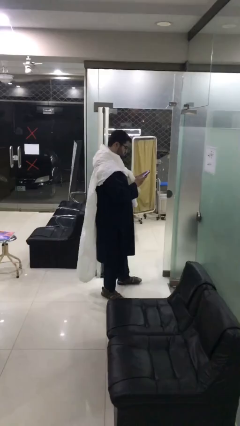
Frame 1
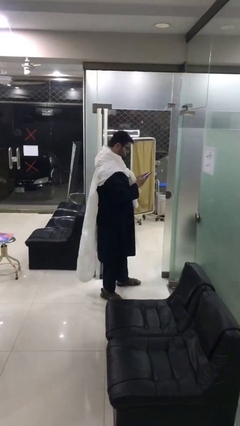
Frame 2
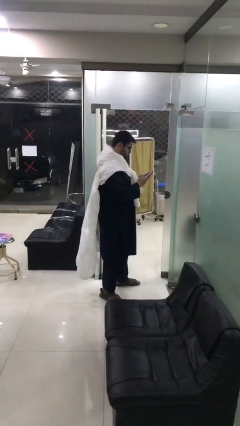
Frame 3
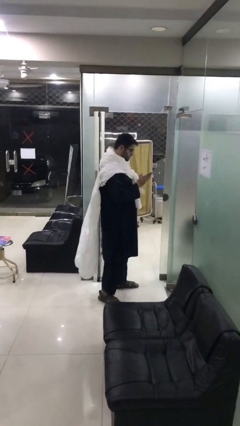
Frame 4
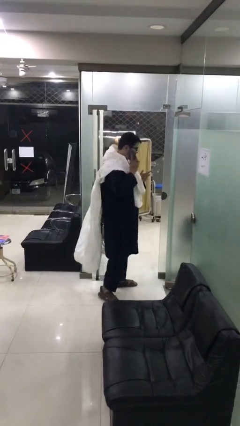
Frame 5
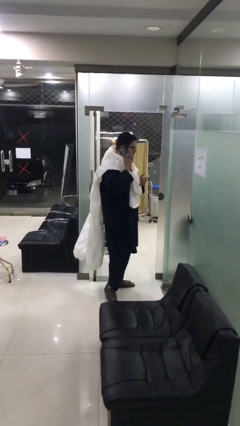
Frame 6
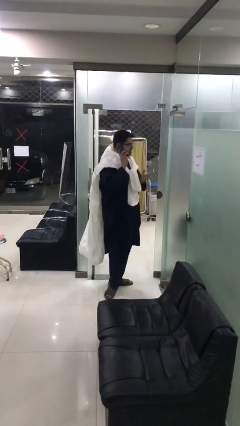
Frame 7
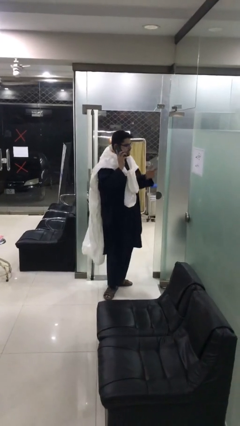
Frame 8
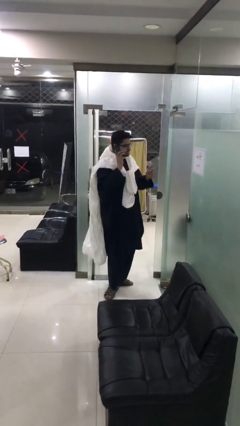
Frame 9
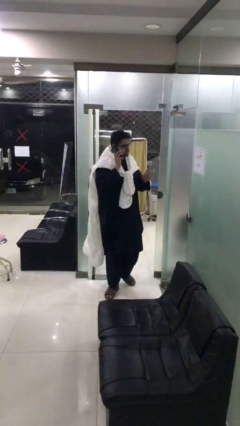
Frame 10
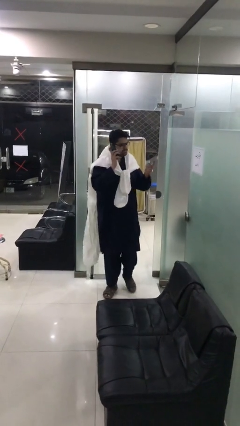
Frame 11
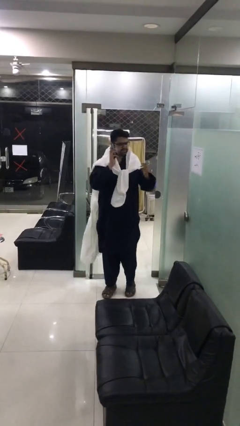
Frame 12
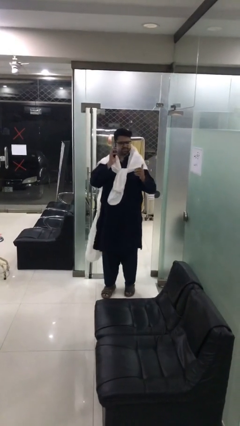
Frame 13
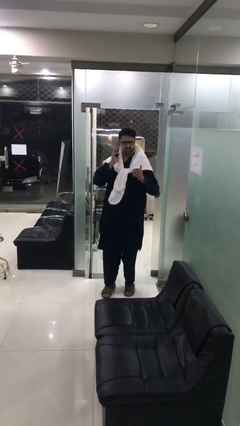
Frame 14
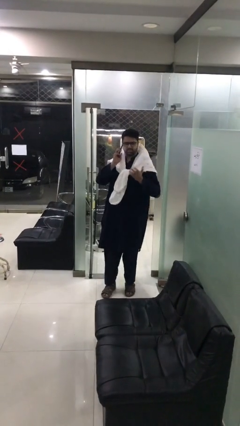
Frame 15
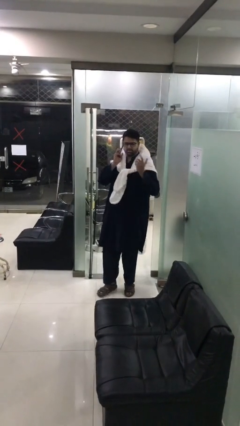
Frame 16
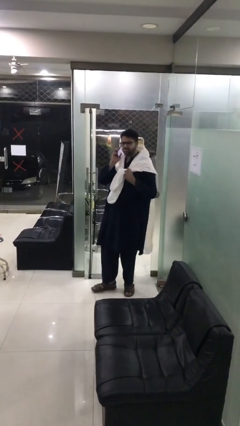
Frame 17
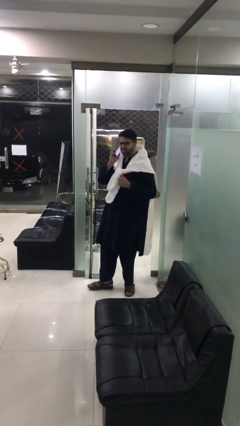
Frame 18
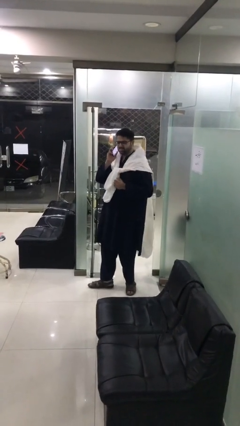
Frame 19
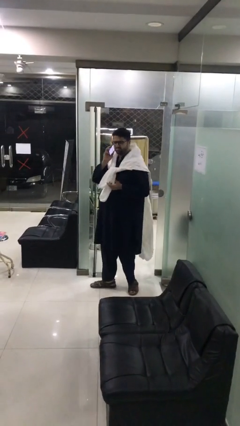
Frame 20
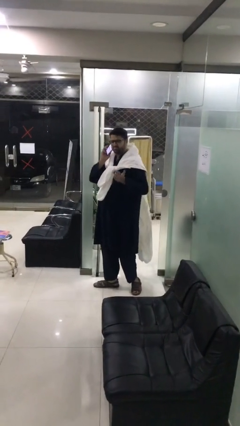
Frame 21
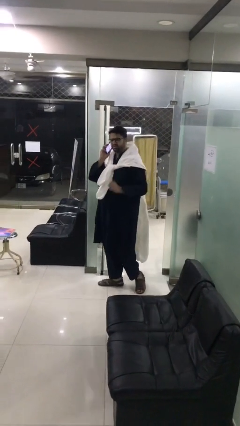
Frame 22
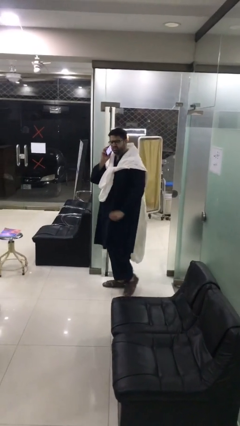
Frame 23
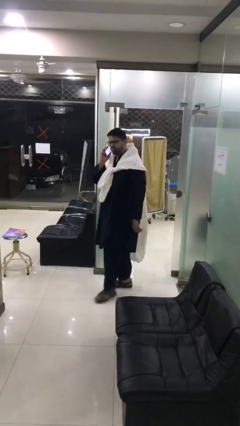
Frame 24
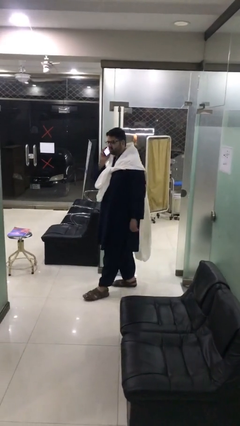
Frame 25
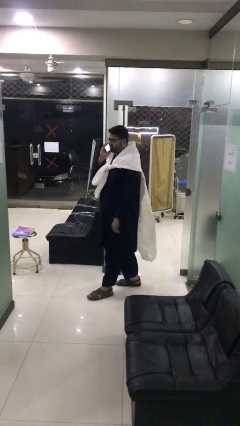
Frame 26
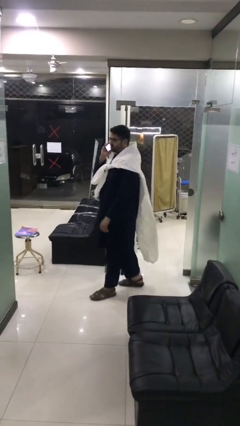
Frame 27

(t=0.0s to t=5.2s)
person talks on phone

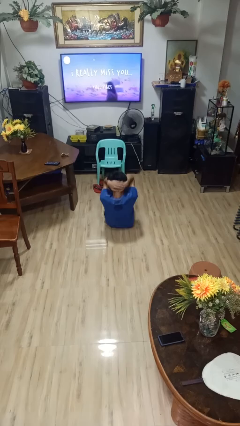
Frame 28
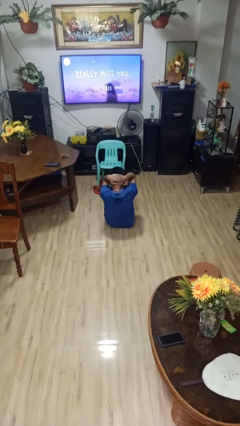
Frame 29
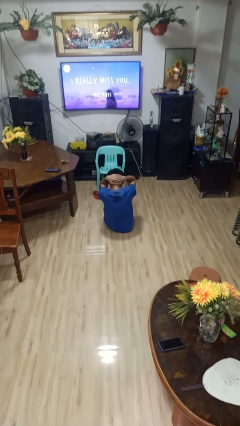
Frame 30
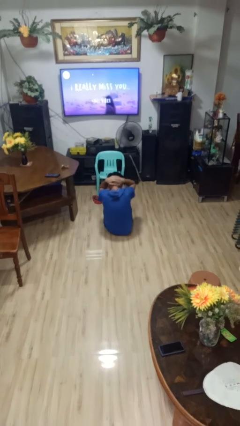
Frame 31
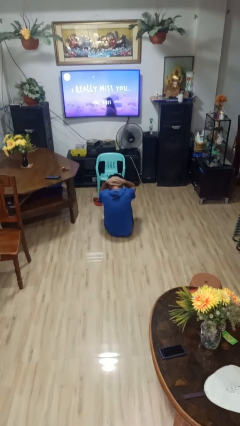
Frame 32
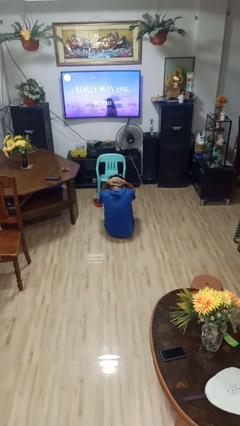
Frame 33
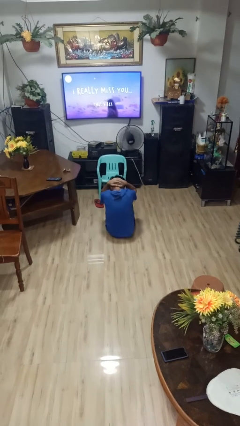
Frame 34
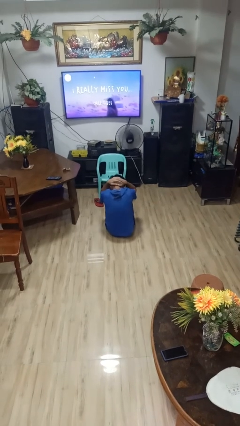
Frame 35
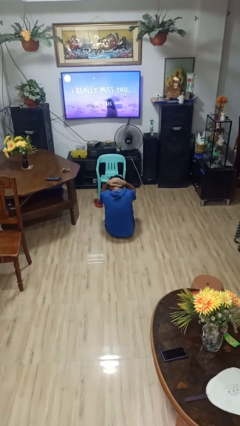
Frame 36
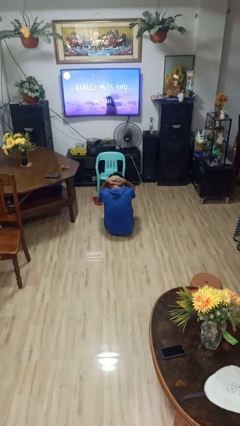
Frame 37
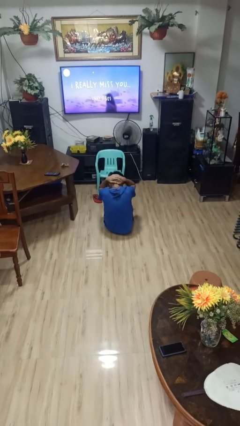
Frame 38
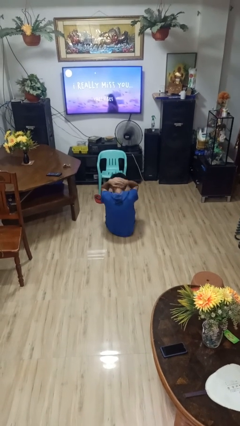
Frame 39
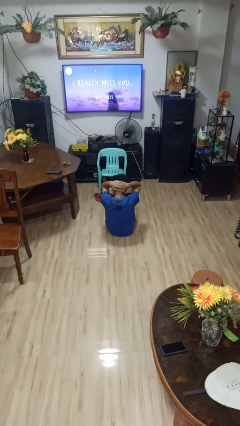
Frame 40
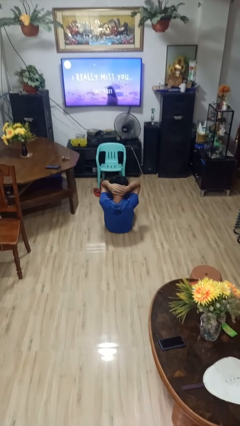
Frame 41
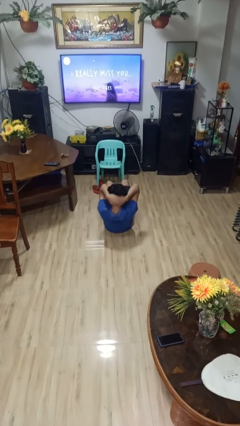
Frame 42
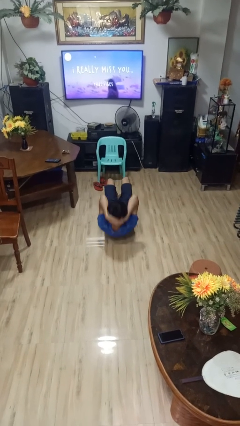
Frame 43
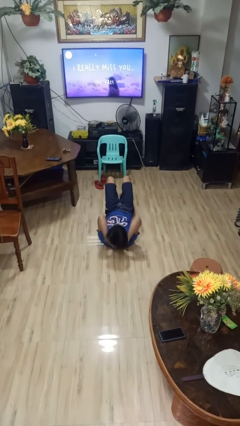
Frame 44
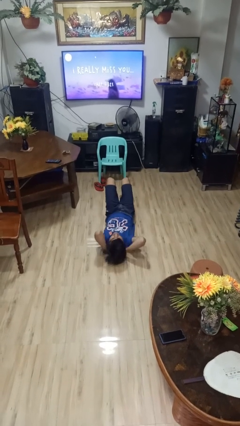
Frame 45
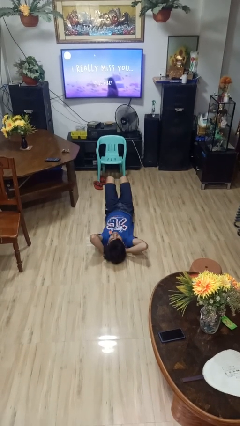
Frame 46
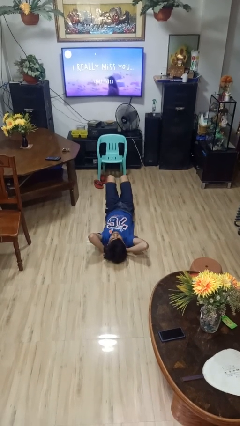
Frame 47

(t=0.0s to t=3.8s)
person drinks from bottle

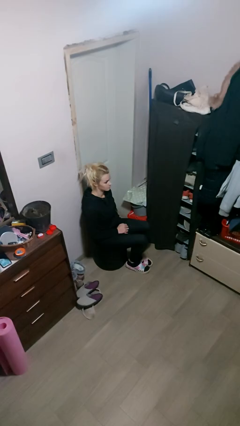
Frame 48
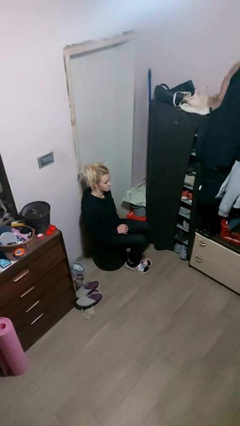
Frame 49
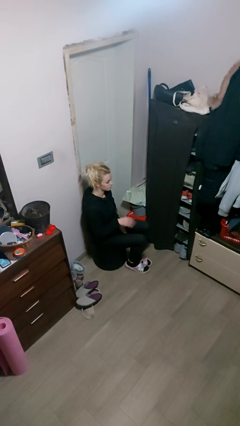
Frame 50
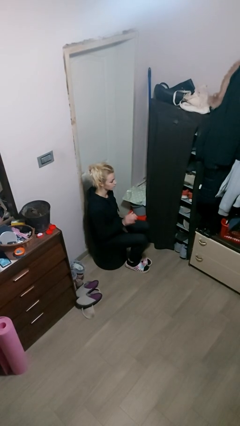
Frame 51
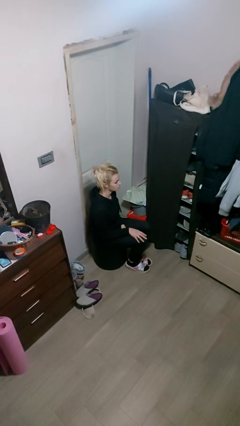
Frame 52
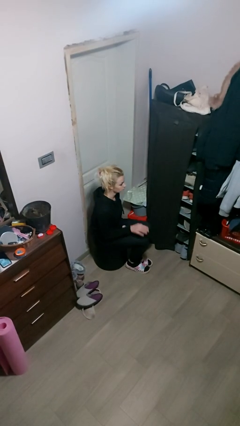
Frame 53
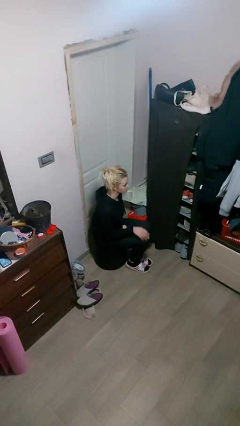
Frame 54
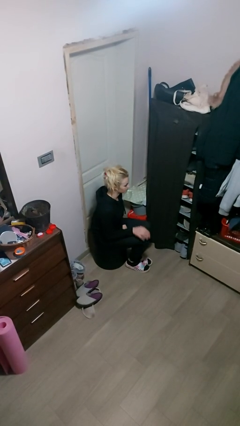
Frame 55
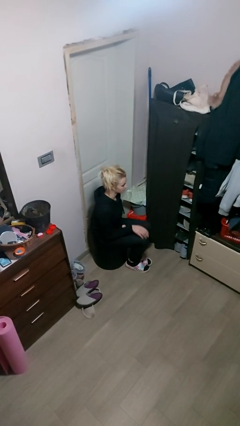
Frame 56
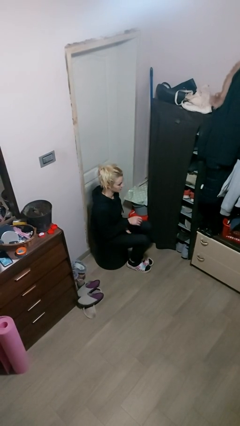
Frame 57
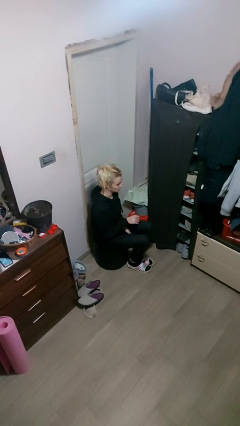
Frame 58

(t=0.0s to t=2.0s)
person slaps hands on thighs

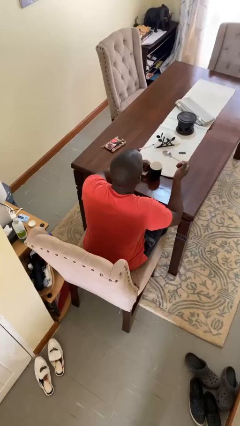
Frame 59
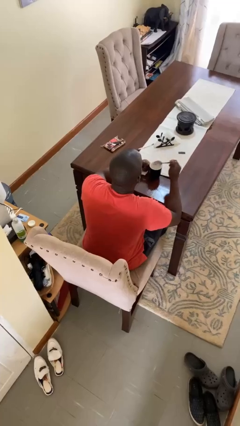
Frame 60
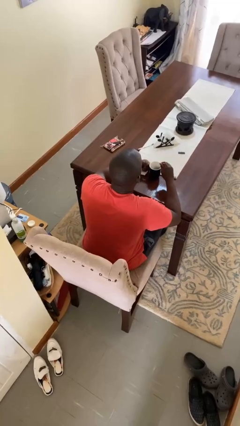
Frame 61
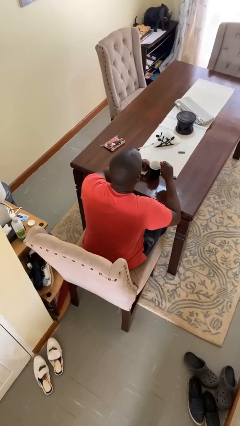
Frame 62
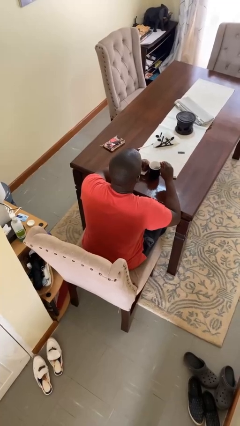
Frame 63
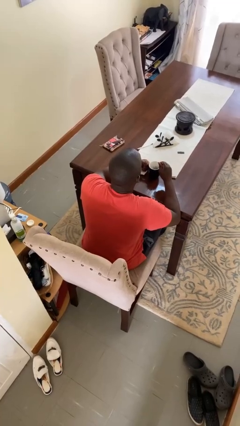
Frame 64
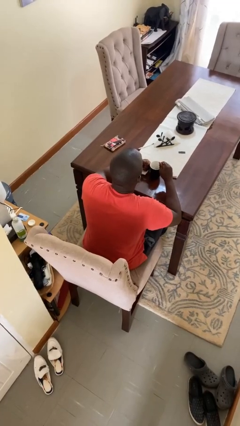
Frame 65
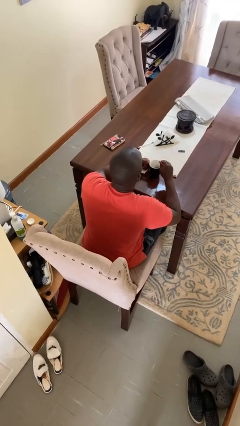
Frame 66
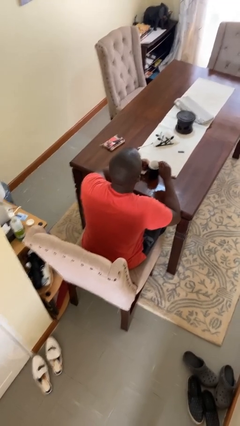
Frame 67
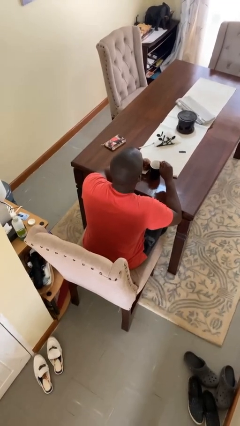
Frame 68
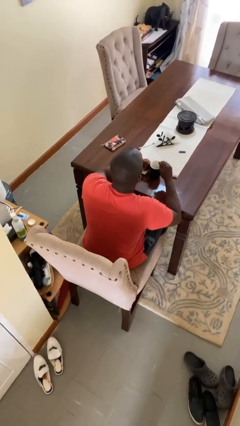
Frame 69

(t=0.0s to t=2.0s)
person stirs mug

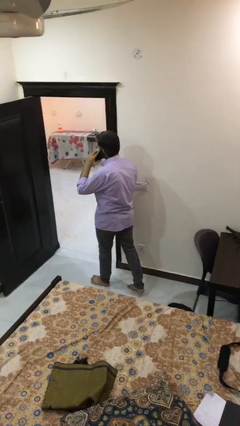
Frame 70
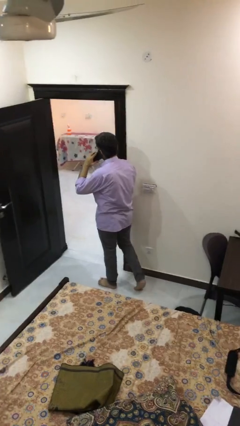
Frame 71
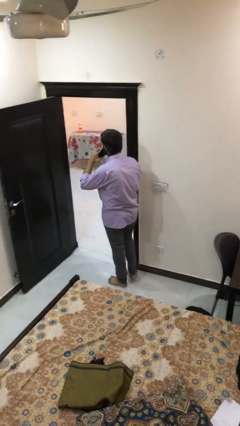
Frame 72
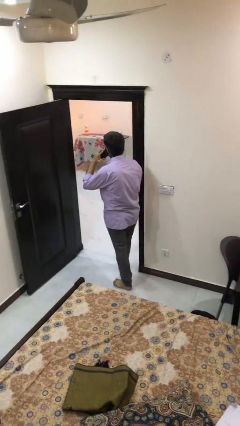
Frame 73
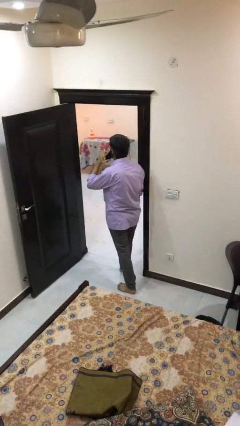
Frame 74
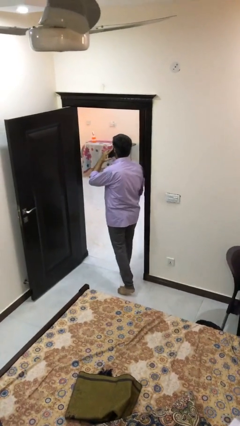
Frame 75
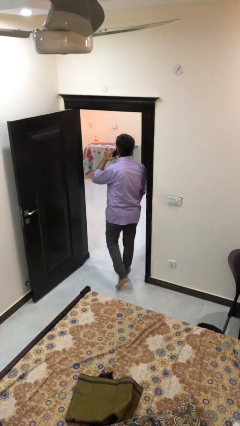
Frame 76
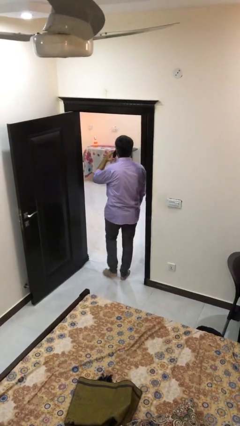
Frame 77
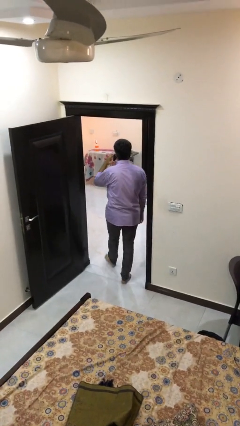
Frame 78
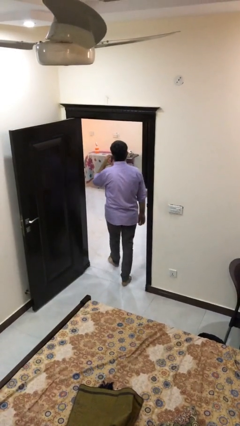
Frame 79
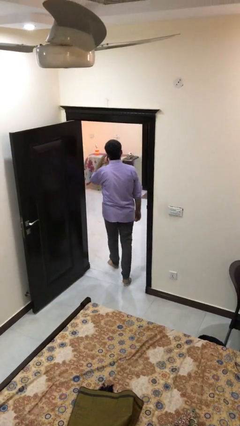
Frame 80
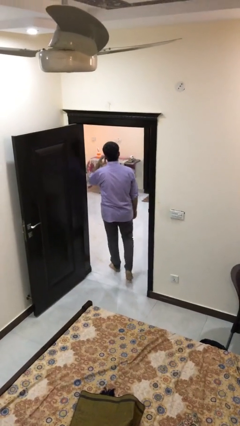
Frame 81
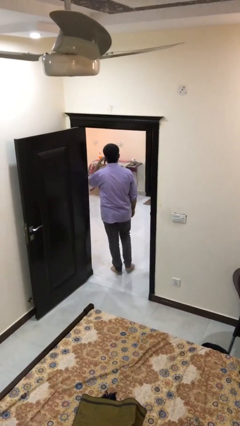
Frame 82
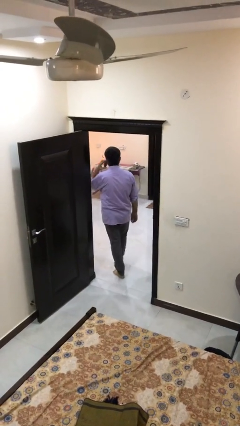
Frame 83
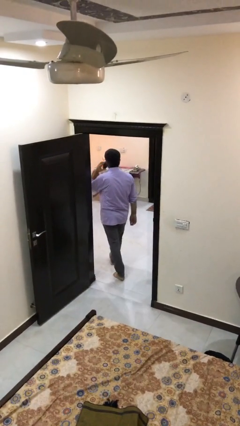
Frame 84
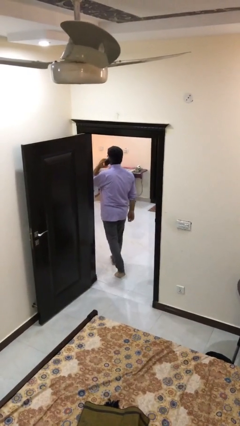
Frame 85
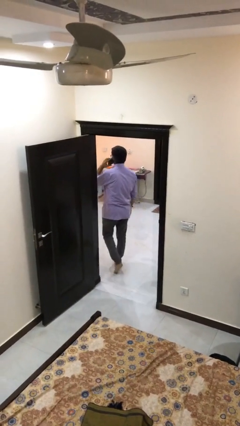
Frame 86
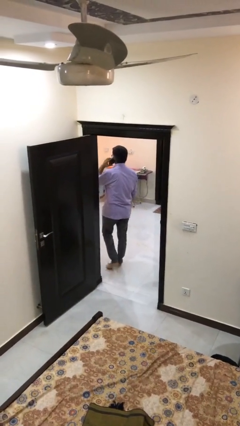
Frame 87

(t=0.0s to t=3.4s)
person exits scene through structure

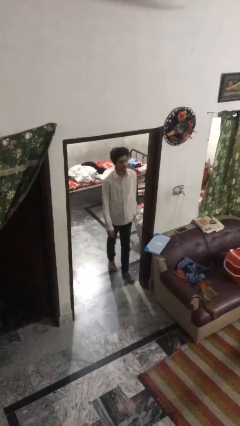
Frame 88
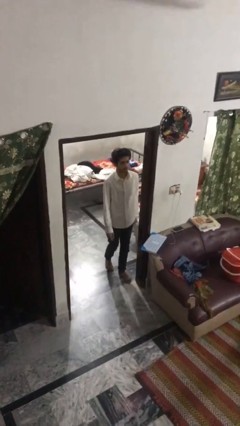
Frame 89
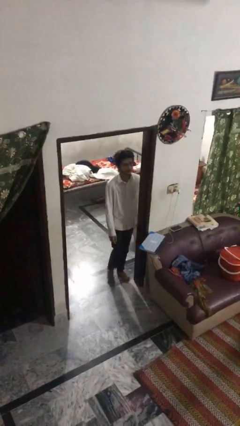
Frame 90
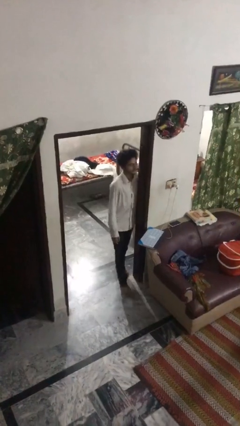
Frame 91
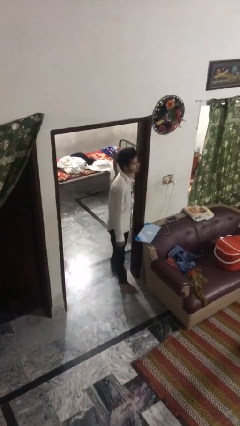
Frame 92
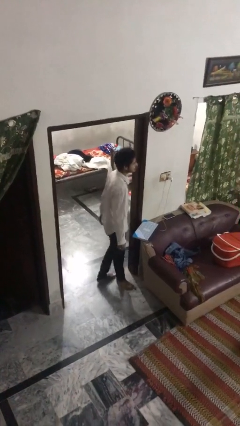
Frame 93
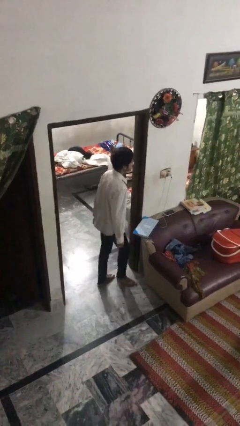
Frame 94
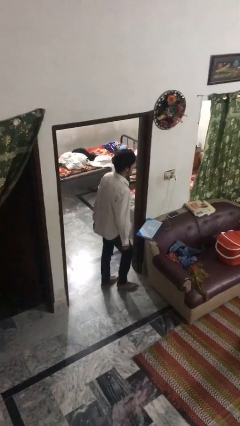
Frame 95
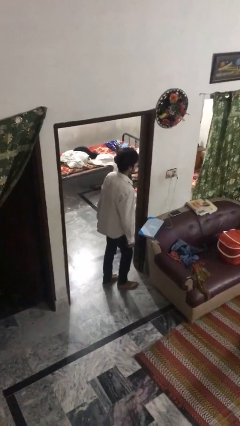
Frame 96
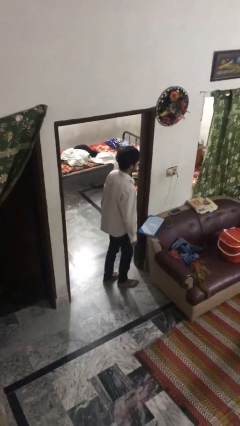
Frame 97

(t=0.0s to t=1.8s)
person bumps into wall
